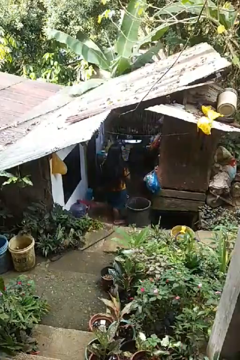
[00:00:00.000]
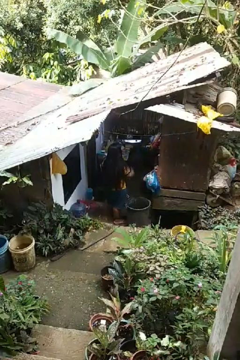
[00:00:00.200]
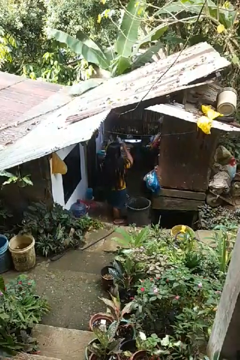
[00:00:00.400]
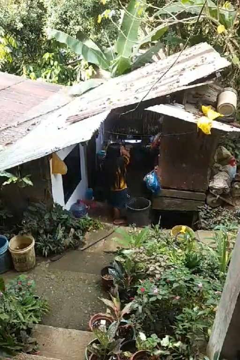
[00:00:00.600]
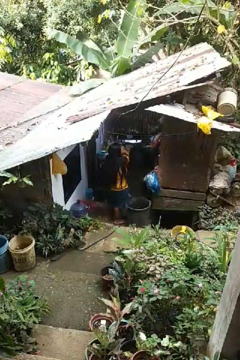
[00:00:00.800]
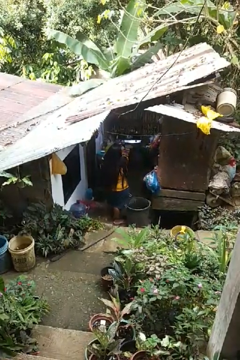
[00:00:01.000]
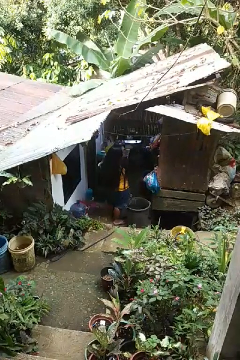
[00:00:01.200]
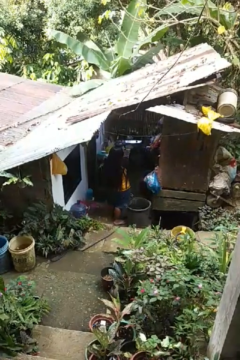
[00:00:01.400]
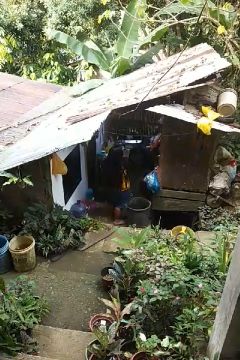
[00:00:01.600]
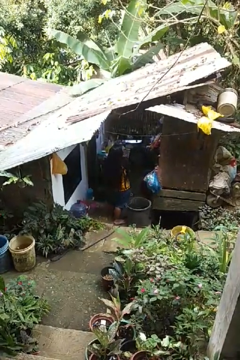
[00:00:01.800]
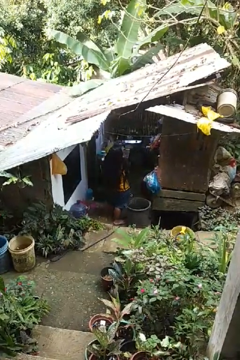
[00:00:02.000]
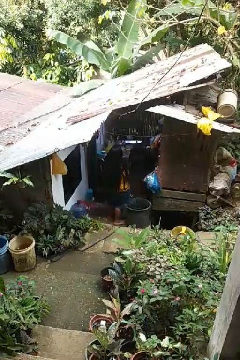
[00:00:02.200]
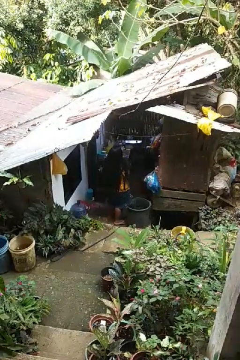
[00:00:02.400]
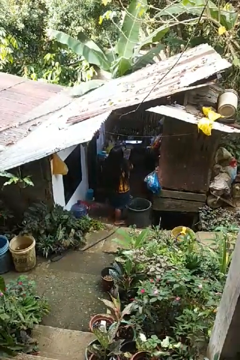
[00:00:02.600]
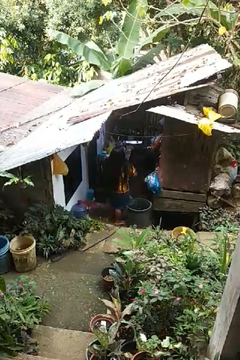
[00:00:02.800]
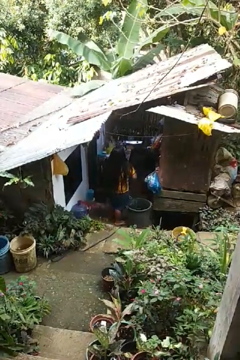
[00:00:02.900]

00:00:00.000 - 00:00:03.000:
person brushes hair

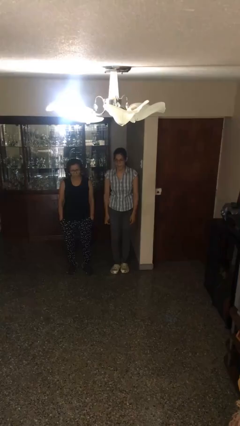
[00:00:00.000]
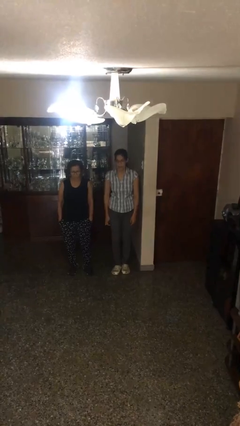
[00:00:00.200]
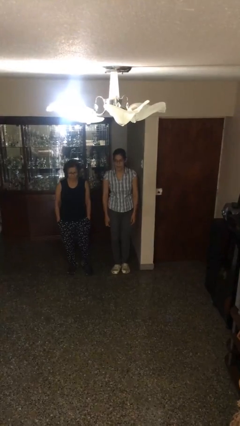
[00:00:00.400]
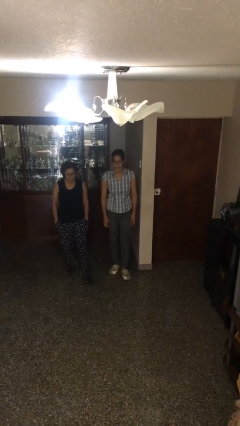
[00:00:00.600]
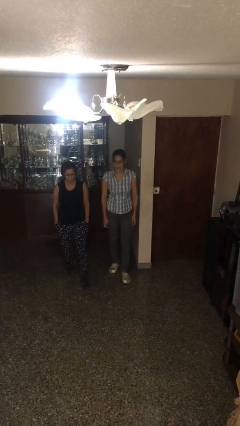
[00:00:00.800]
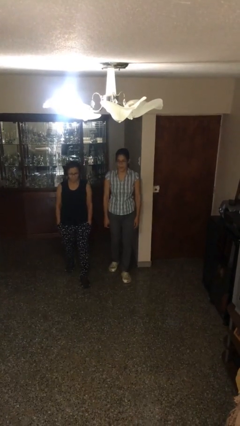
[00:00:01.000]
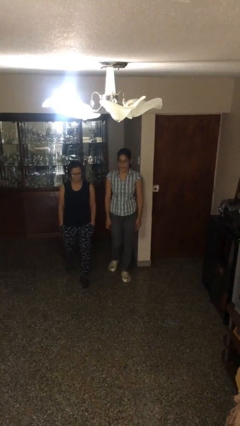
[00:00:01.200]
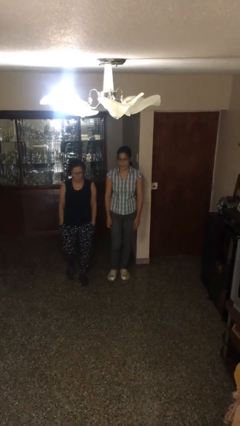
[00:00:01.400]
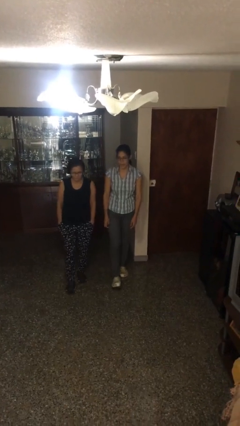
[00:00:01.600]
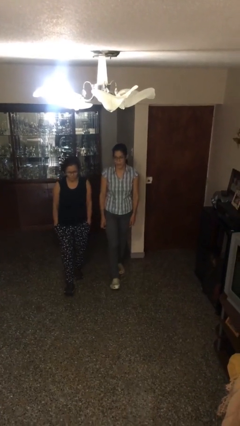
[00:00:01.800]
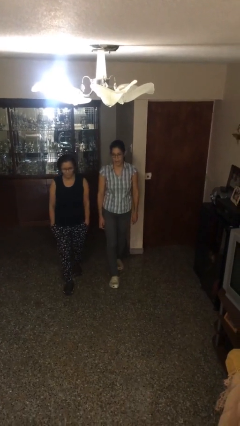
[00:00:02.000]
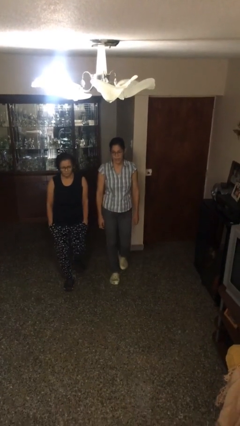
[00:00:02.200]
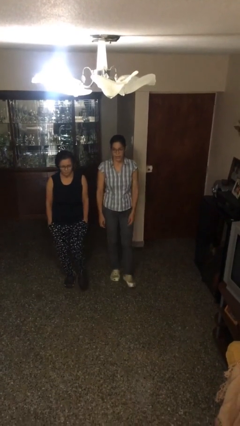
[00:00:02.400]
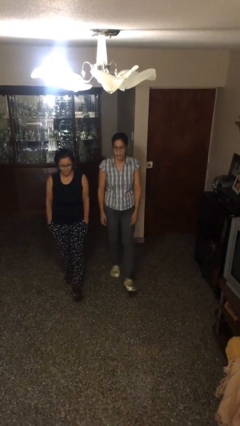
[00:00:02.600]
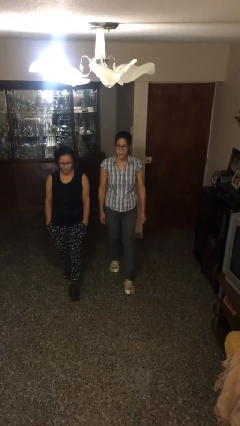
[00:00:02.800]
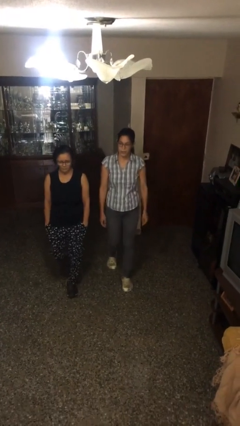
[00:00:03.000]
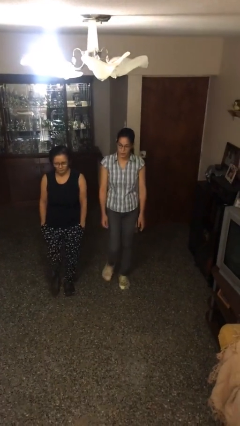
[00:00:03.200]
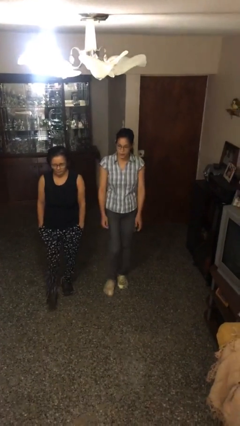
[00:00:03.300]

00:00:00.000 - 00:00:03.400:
person talks to person

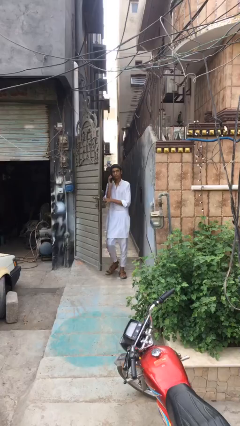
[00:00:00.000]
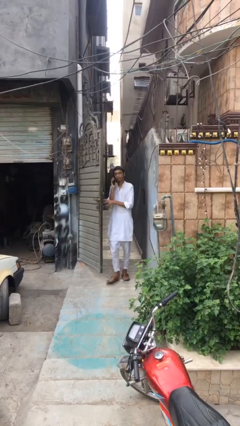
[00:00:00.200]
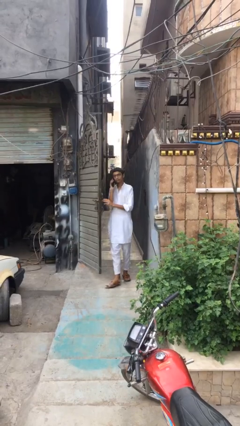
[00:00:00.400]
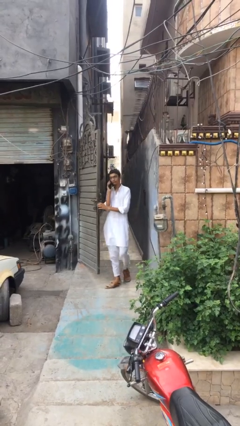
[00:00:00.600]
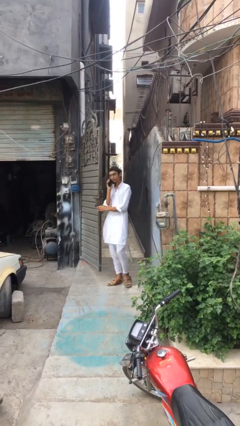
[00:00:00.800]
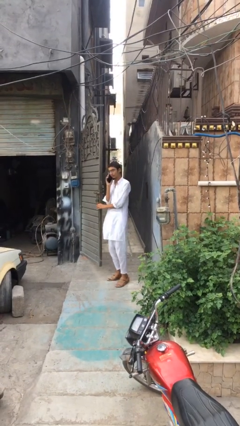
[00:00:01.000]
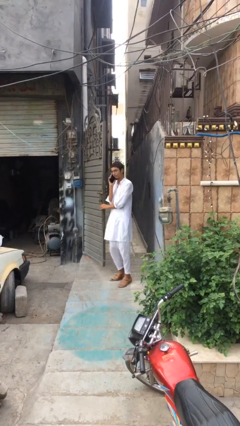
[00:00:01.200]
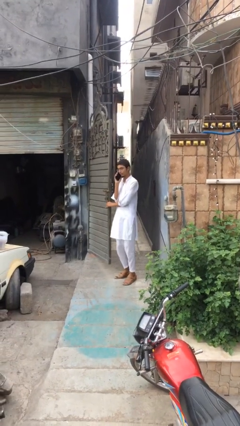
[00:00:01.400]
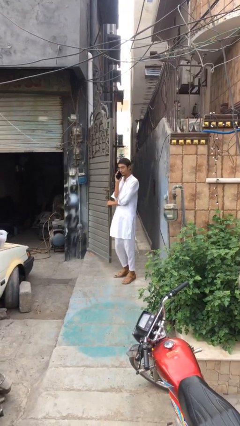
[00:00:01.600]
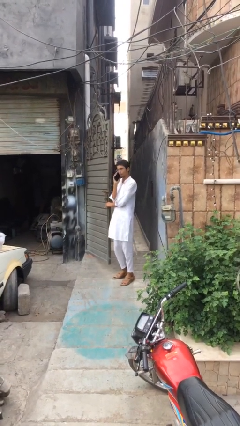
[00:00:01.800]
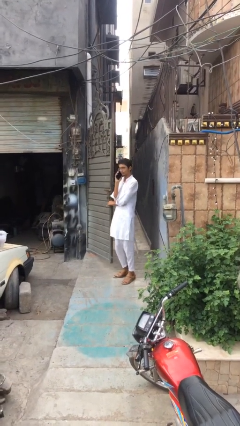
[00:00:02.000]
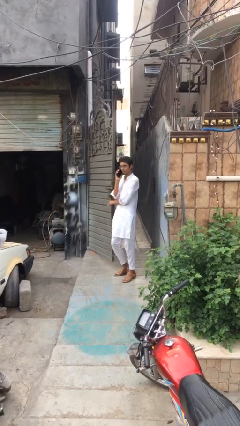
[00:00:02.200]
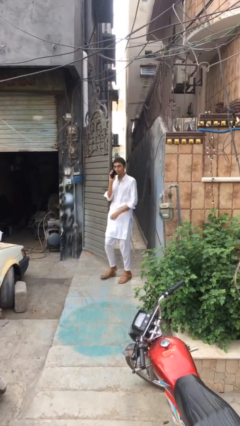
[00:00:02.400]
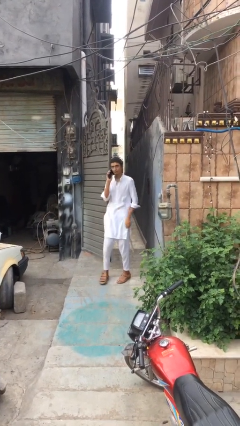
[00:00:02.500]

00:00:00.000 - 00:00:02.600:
person enters scene through structure

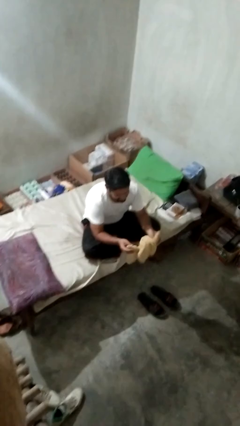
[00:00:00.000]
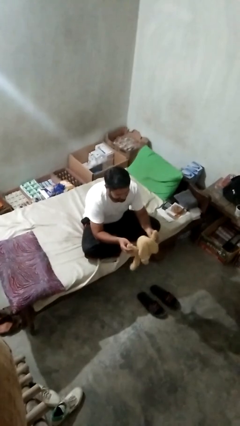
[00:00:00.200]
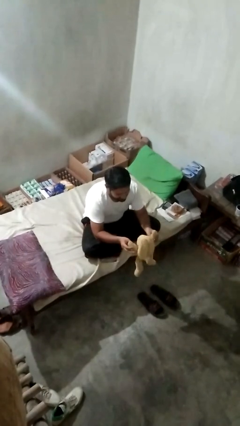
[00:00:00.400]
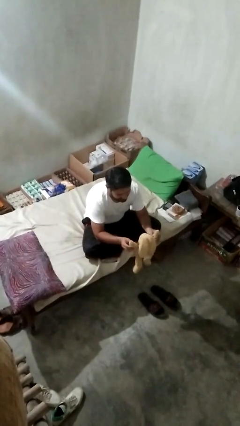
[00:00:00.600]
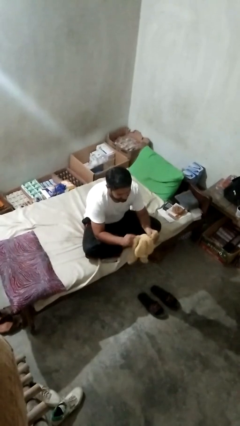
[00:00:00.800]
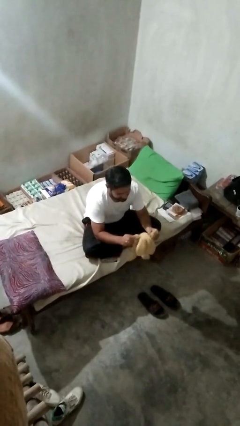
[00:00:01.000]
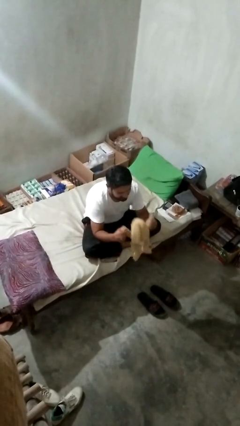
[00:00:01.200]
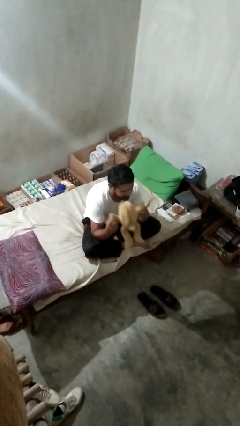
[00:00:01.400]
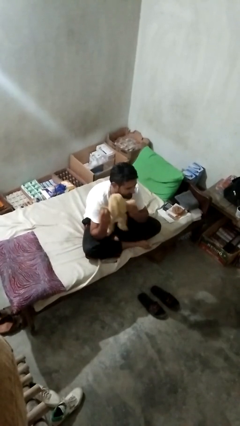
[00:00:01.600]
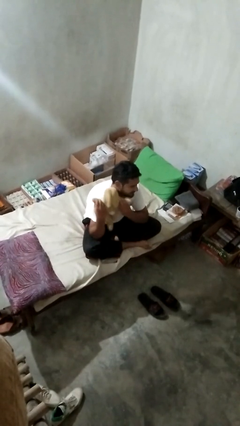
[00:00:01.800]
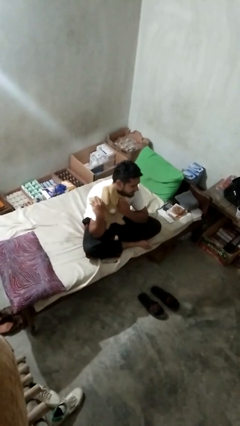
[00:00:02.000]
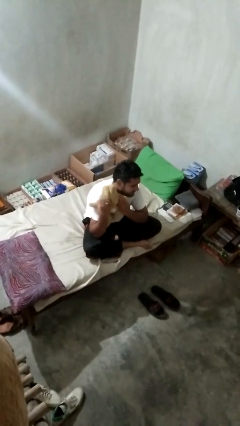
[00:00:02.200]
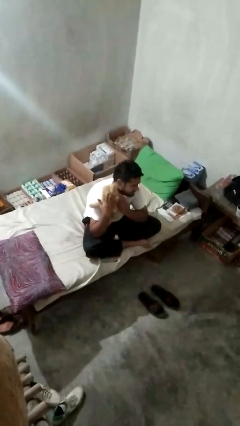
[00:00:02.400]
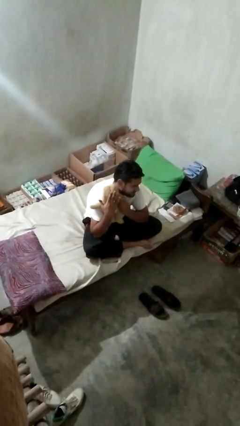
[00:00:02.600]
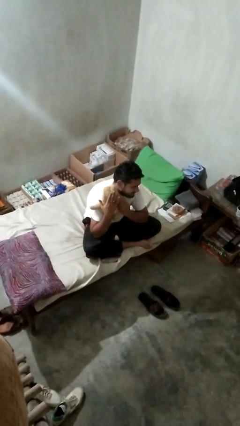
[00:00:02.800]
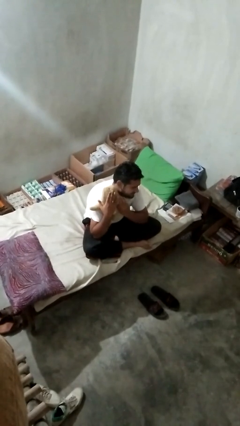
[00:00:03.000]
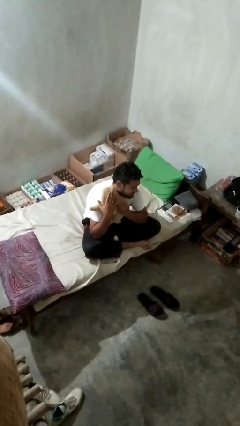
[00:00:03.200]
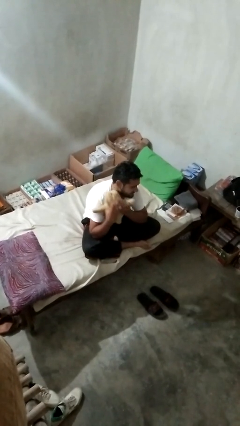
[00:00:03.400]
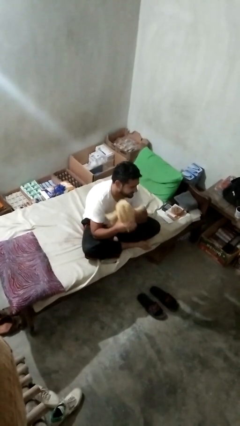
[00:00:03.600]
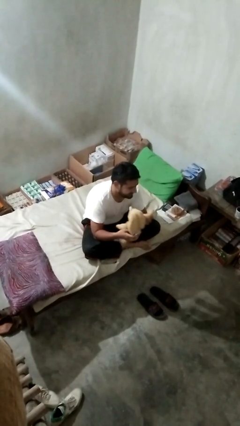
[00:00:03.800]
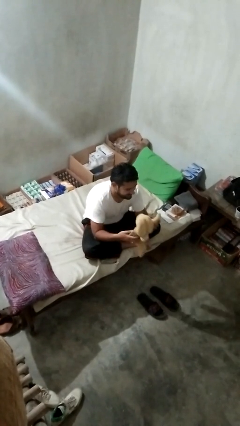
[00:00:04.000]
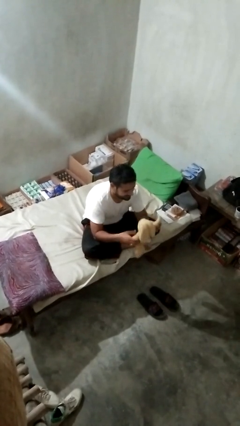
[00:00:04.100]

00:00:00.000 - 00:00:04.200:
person hugs stuffed animal

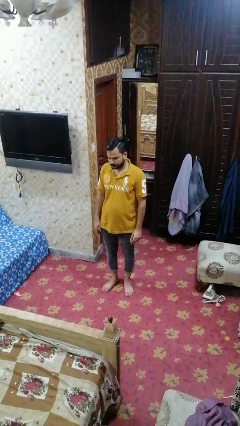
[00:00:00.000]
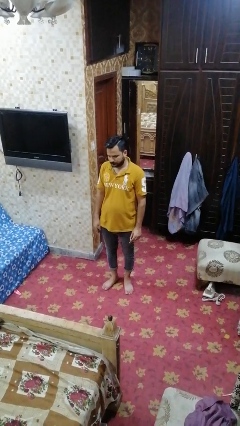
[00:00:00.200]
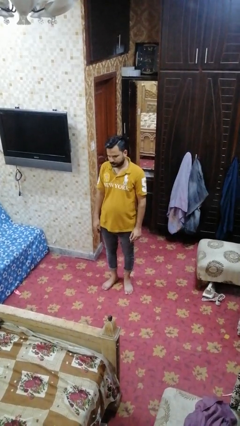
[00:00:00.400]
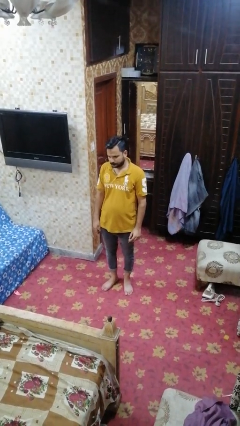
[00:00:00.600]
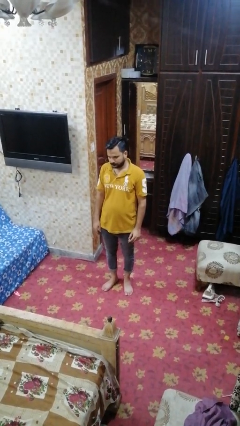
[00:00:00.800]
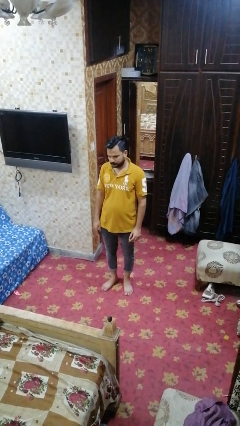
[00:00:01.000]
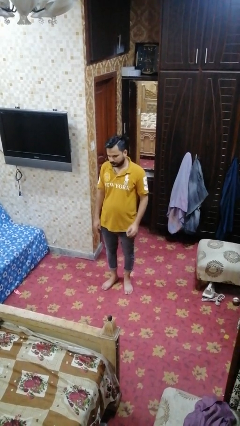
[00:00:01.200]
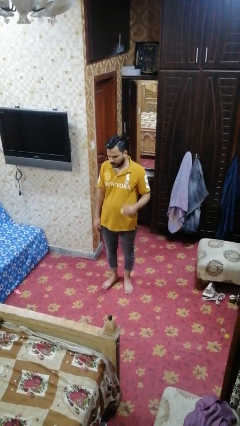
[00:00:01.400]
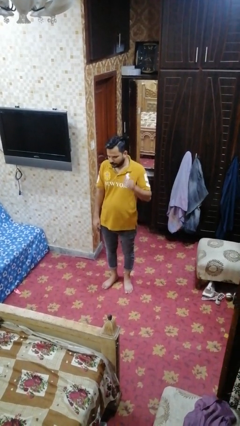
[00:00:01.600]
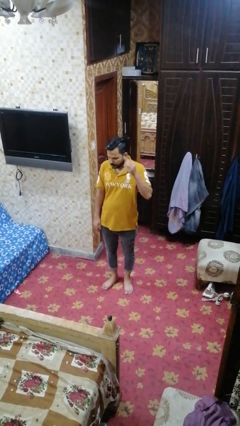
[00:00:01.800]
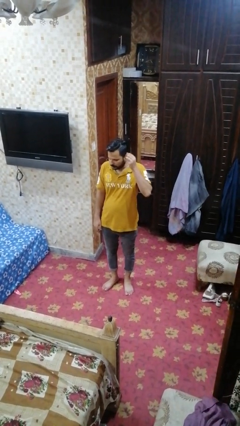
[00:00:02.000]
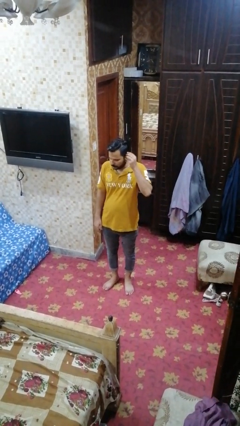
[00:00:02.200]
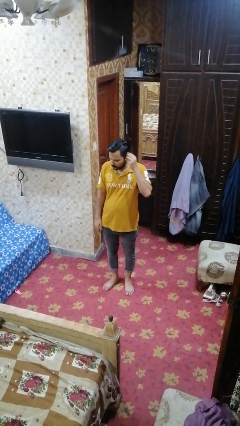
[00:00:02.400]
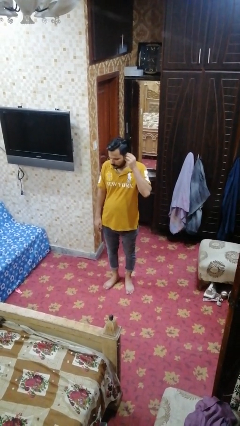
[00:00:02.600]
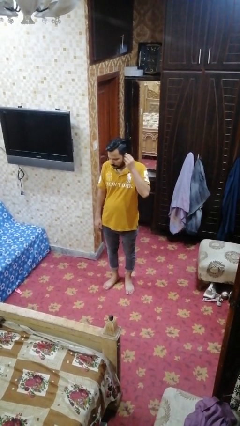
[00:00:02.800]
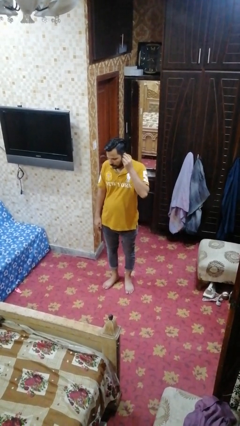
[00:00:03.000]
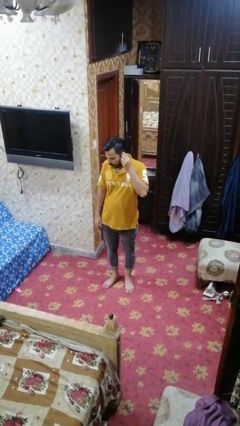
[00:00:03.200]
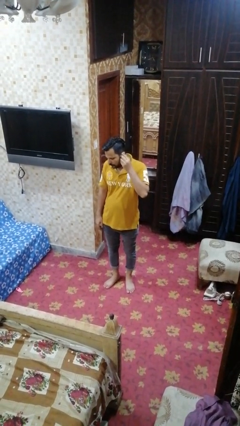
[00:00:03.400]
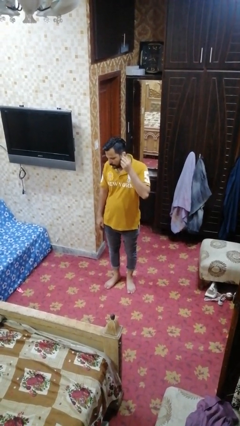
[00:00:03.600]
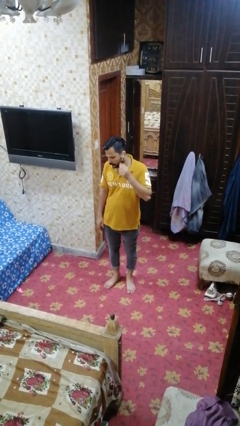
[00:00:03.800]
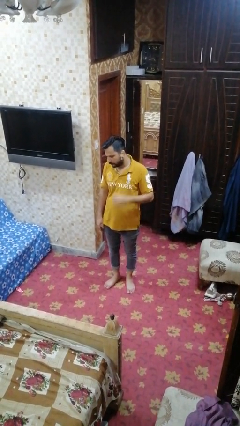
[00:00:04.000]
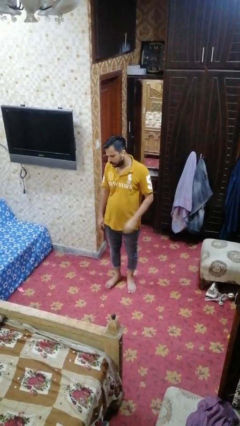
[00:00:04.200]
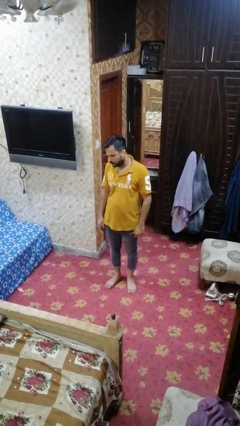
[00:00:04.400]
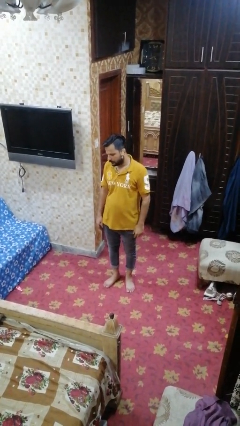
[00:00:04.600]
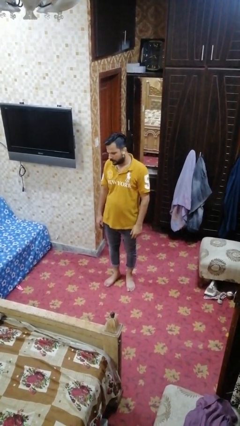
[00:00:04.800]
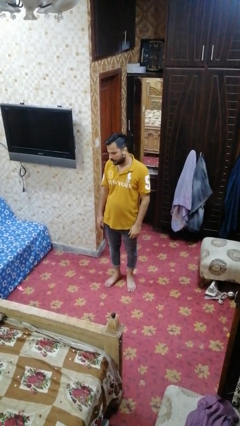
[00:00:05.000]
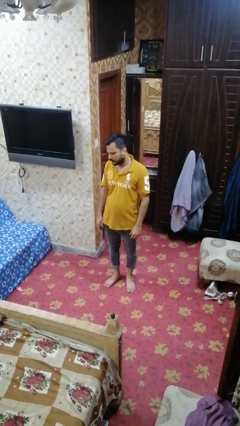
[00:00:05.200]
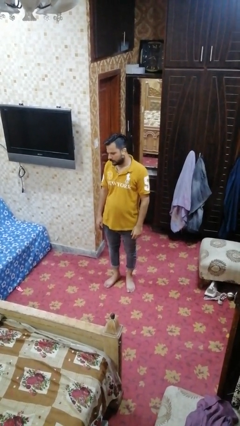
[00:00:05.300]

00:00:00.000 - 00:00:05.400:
person puts on earrings
